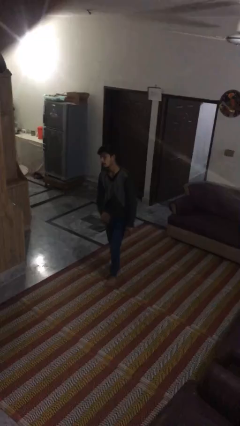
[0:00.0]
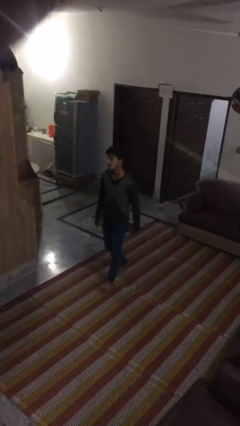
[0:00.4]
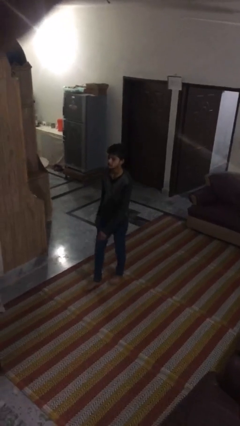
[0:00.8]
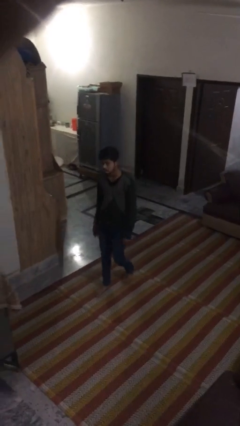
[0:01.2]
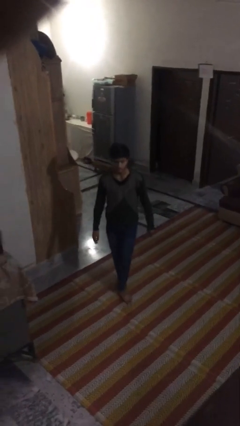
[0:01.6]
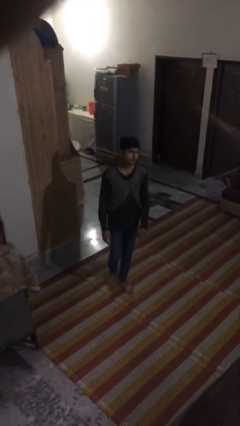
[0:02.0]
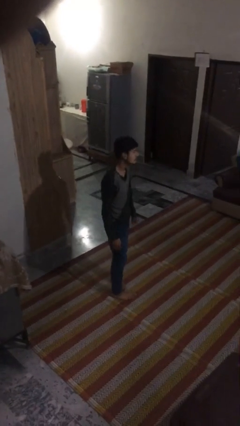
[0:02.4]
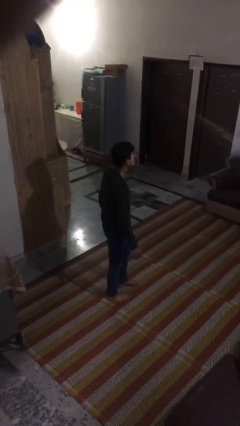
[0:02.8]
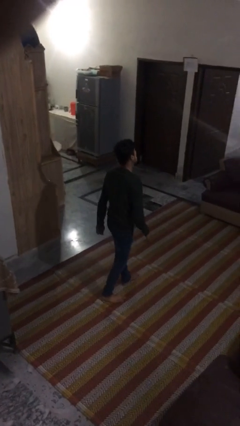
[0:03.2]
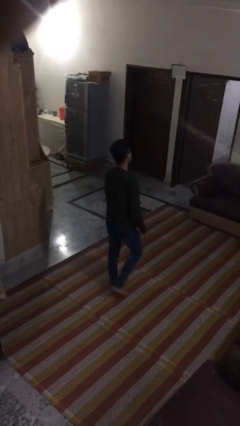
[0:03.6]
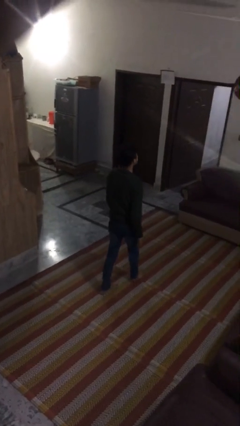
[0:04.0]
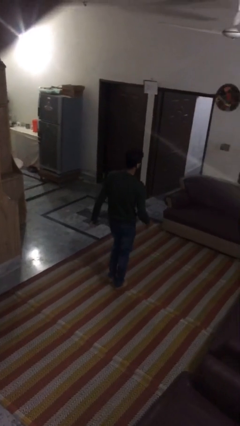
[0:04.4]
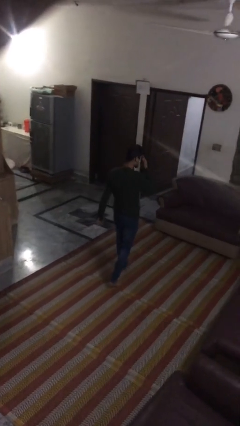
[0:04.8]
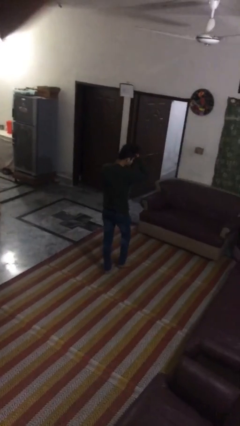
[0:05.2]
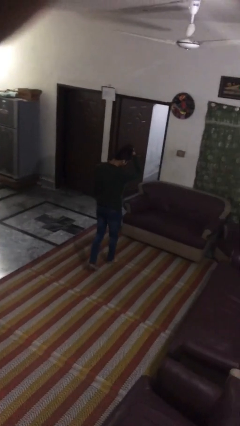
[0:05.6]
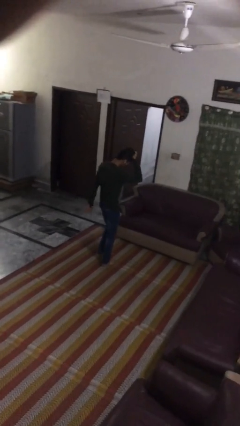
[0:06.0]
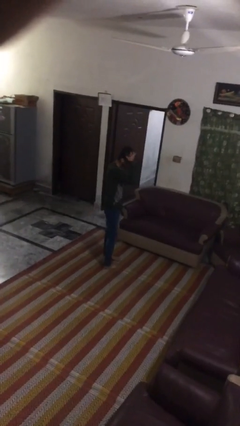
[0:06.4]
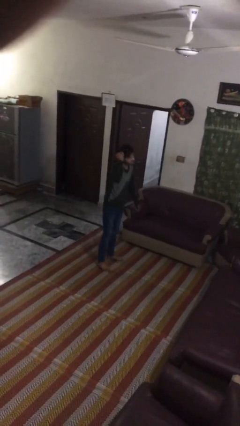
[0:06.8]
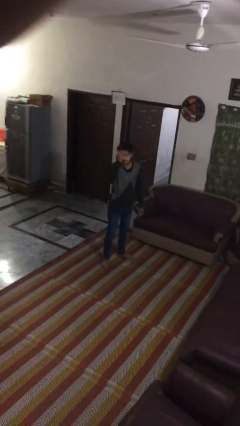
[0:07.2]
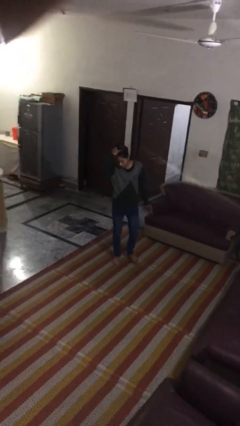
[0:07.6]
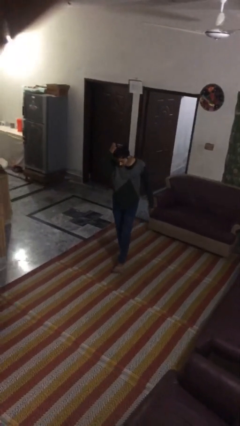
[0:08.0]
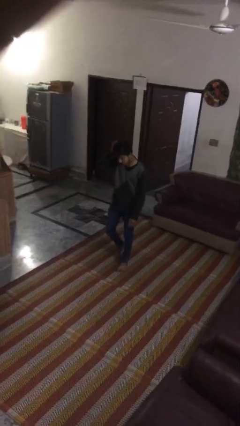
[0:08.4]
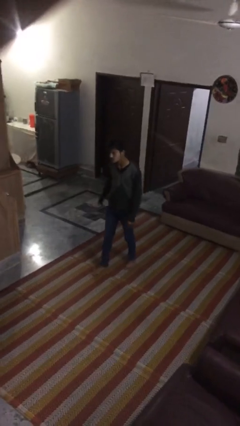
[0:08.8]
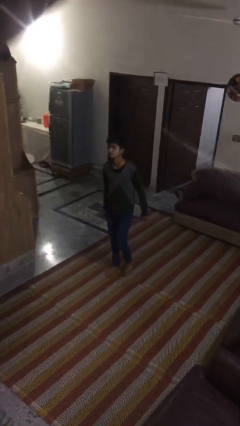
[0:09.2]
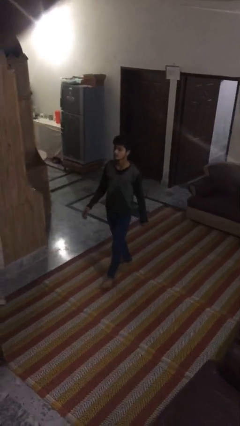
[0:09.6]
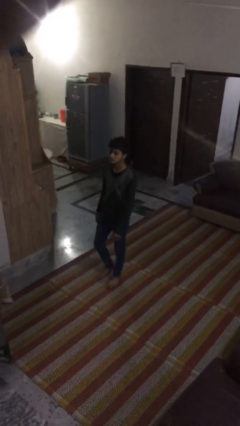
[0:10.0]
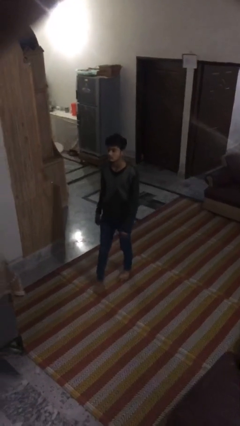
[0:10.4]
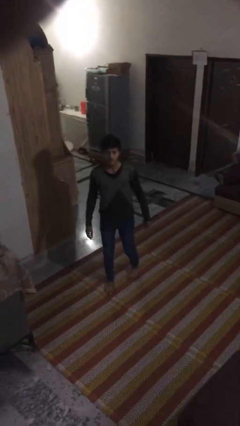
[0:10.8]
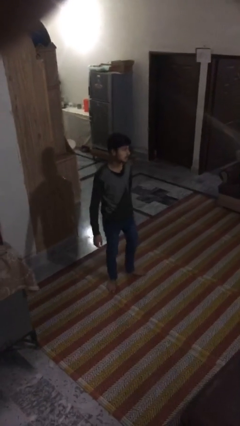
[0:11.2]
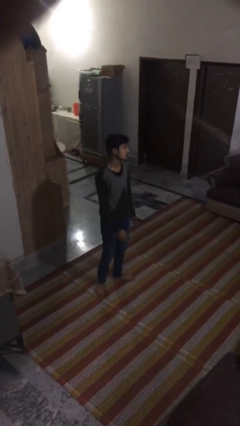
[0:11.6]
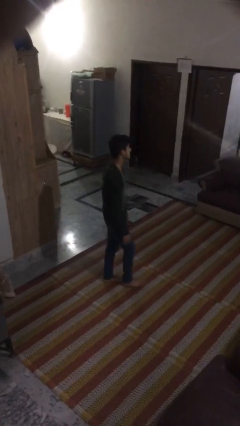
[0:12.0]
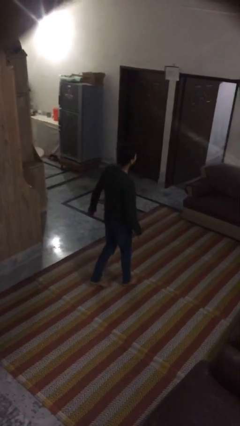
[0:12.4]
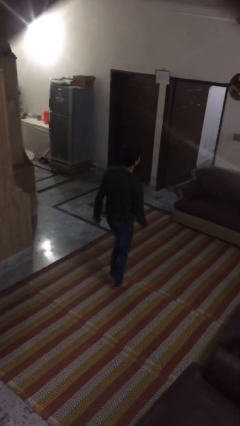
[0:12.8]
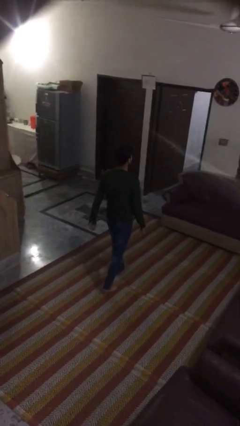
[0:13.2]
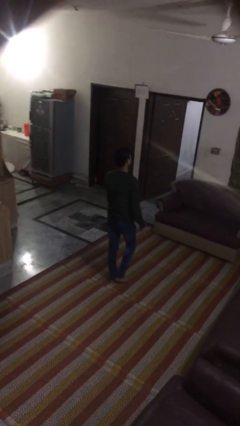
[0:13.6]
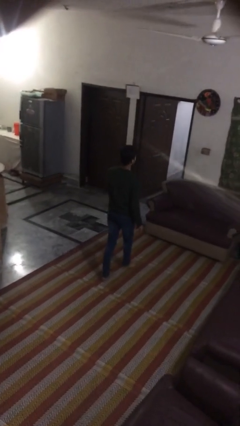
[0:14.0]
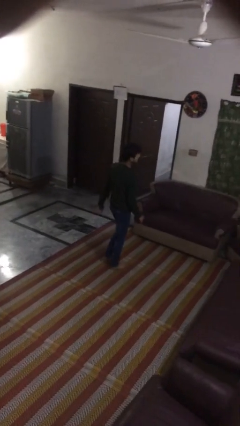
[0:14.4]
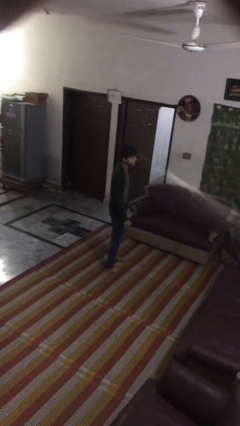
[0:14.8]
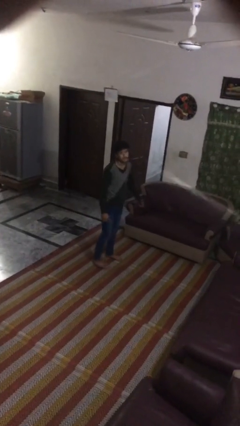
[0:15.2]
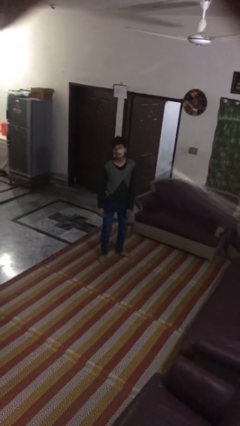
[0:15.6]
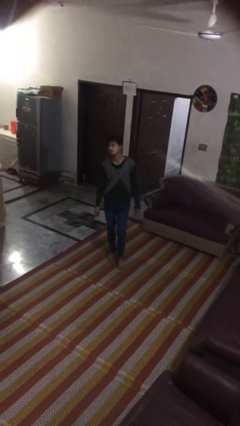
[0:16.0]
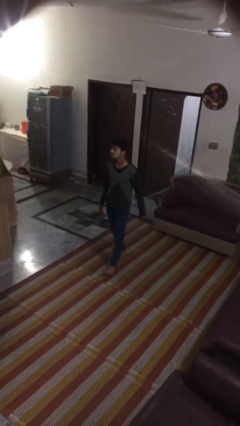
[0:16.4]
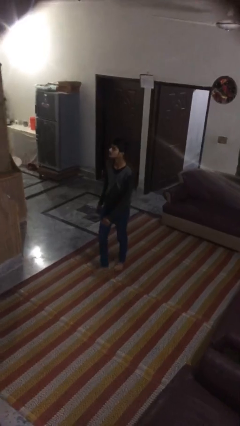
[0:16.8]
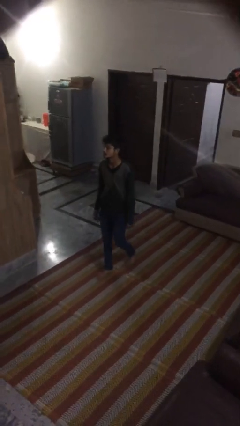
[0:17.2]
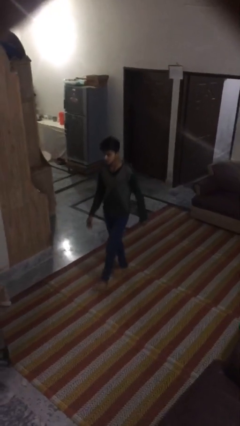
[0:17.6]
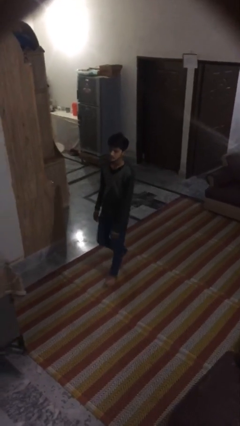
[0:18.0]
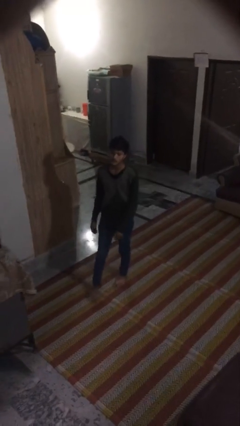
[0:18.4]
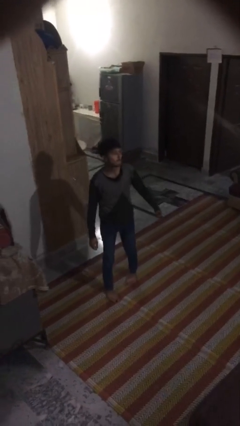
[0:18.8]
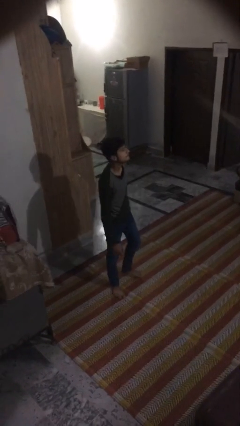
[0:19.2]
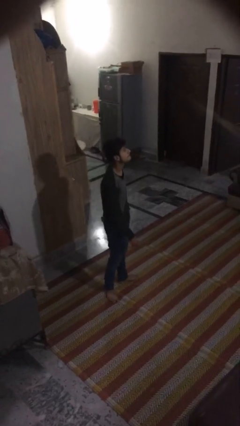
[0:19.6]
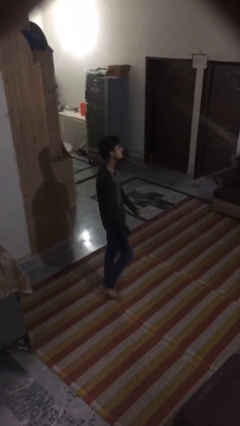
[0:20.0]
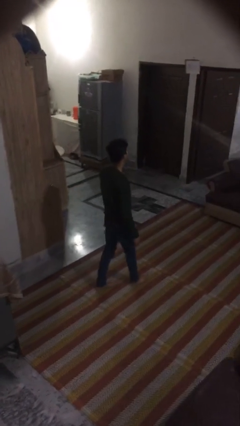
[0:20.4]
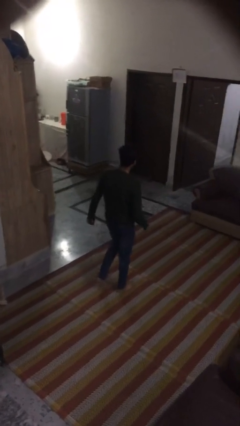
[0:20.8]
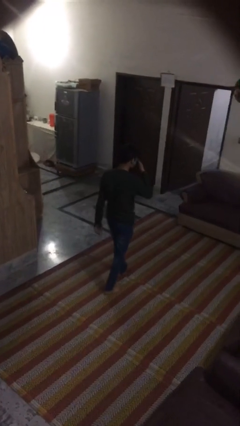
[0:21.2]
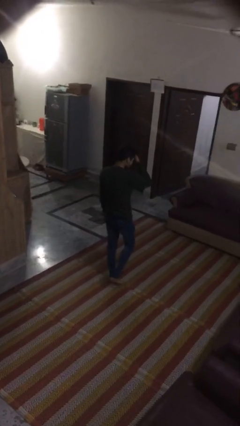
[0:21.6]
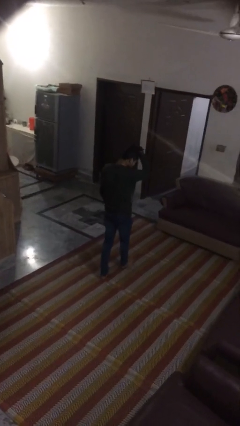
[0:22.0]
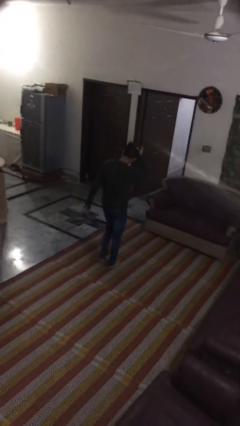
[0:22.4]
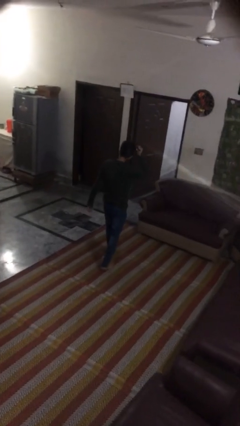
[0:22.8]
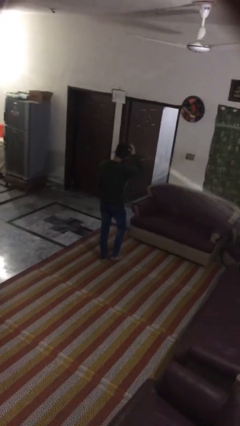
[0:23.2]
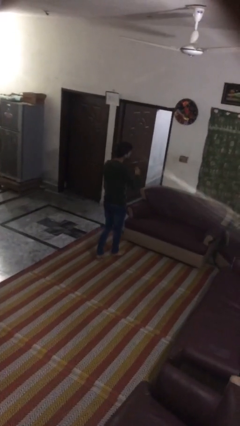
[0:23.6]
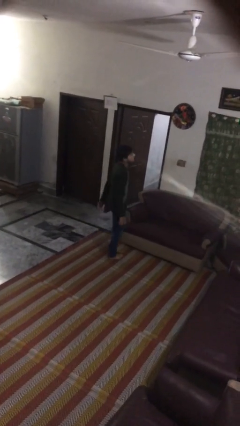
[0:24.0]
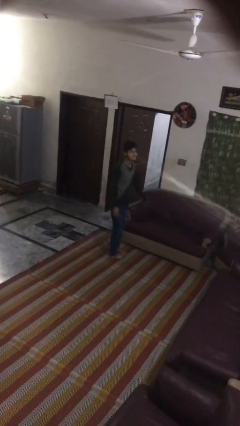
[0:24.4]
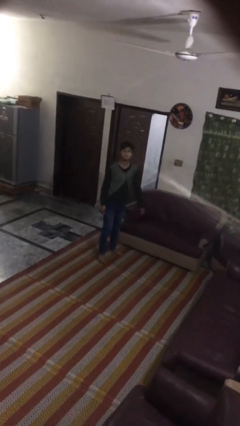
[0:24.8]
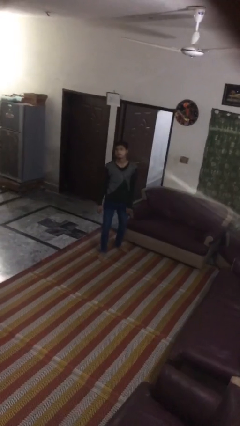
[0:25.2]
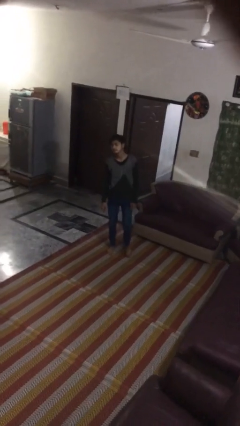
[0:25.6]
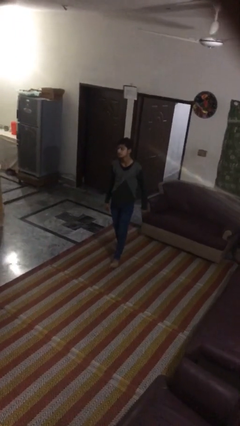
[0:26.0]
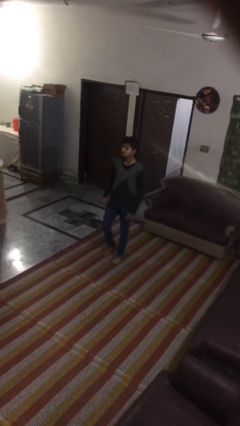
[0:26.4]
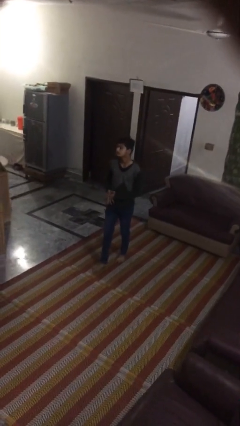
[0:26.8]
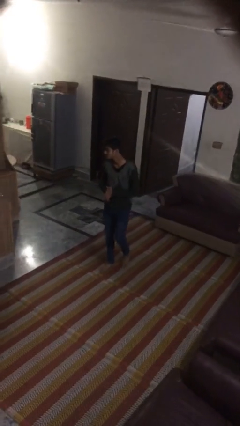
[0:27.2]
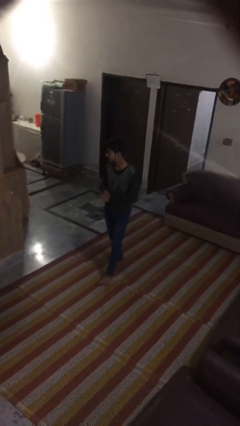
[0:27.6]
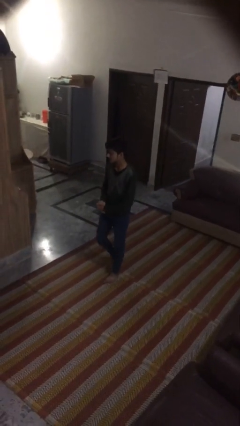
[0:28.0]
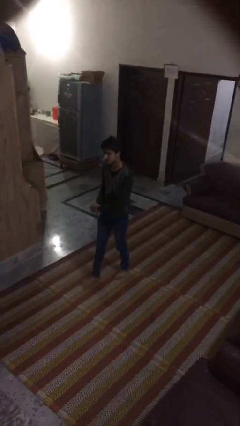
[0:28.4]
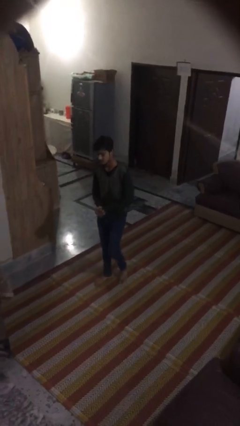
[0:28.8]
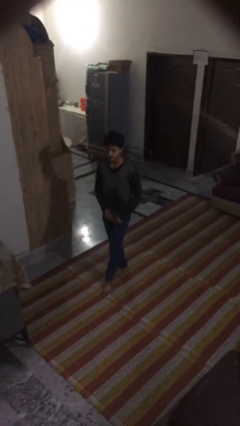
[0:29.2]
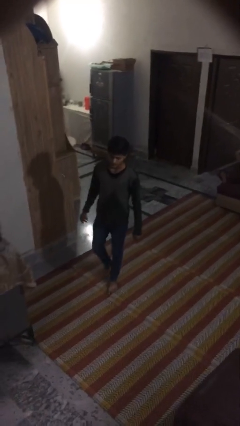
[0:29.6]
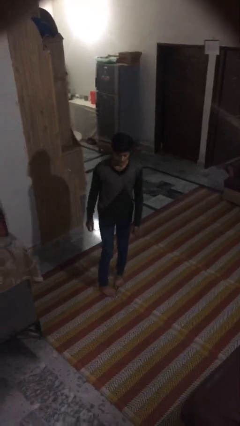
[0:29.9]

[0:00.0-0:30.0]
person walks

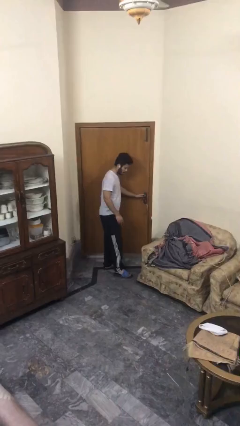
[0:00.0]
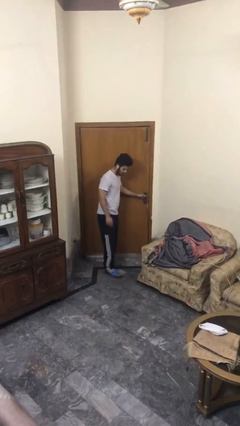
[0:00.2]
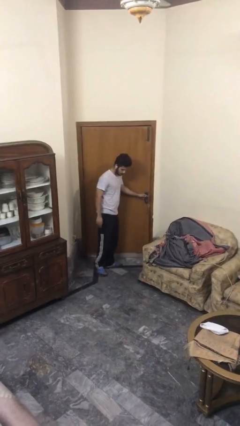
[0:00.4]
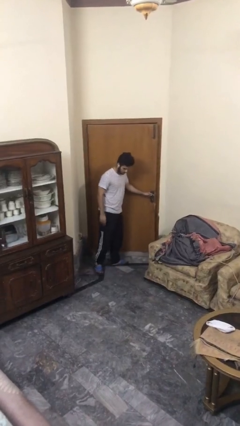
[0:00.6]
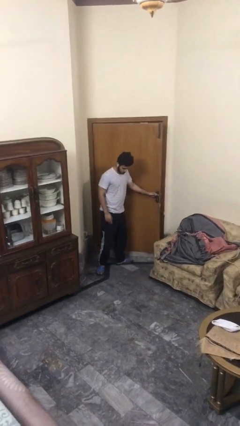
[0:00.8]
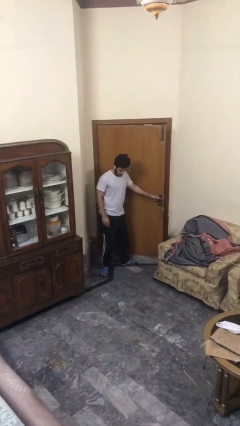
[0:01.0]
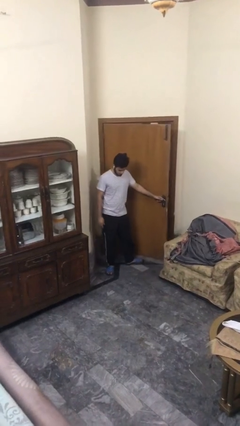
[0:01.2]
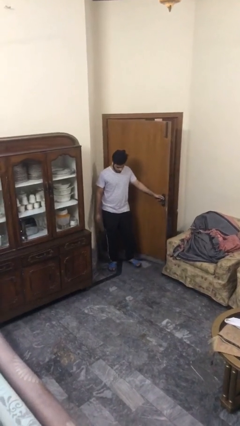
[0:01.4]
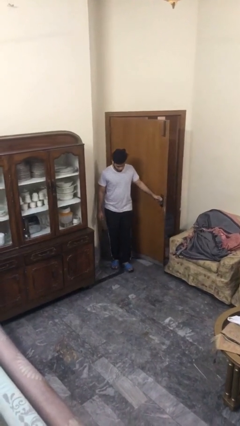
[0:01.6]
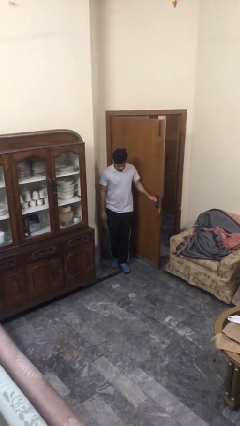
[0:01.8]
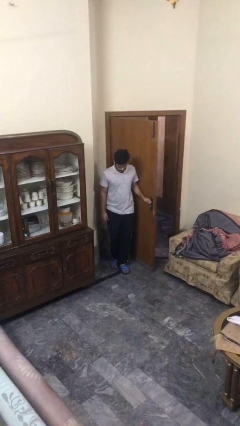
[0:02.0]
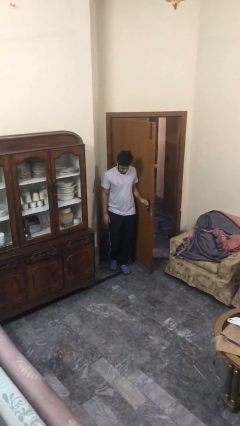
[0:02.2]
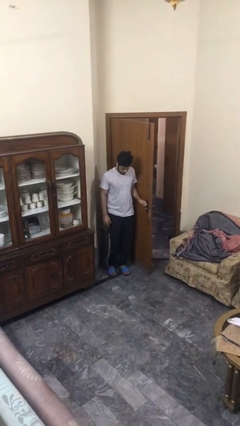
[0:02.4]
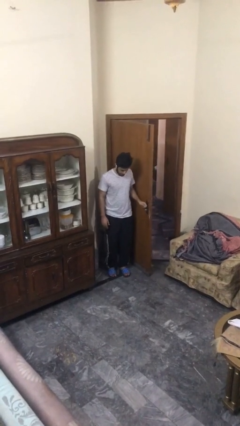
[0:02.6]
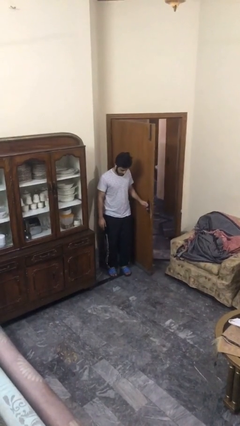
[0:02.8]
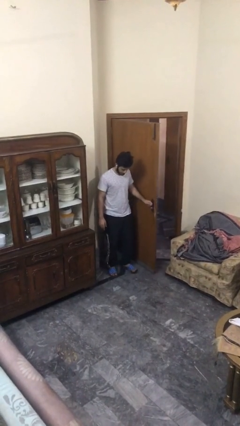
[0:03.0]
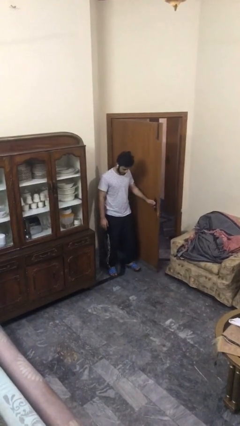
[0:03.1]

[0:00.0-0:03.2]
person opens facility door

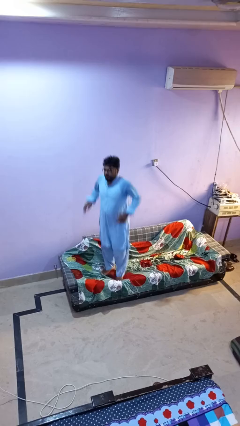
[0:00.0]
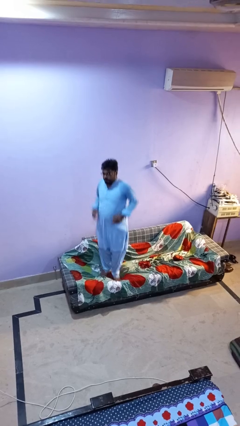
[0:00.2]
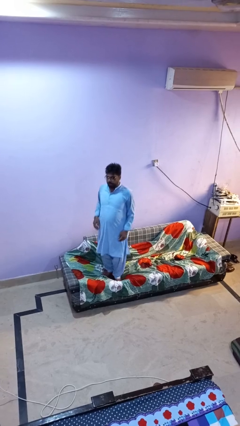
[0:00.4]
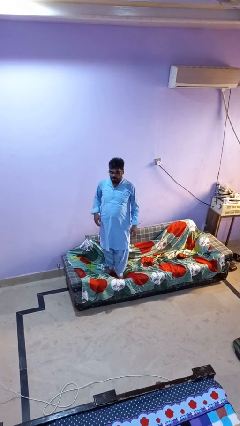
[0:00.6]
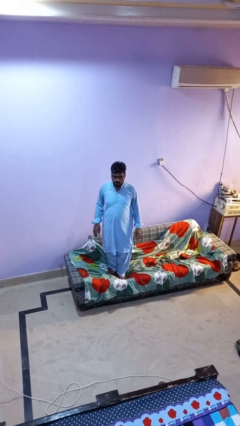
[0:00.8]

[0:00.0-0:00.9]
person jumps on couch
